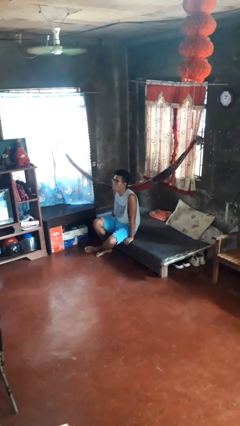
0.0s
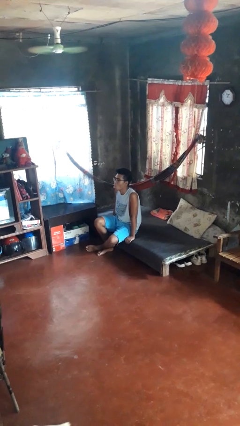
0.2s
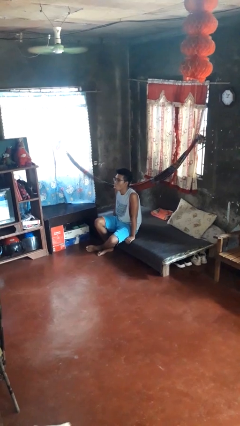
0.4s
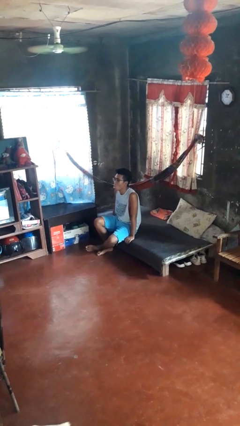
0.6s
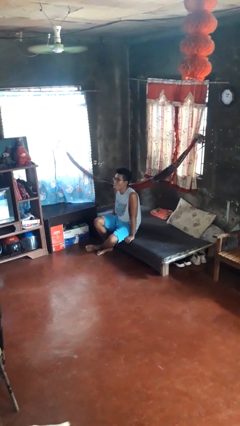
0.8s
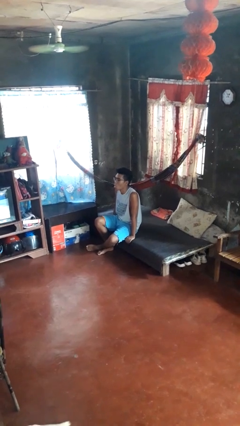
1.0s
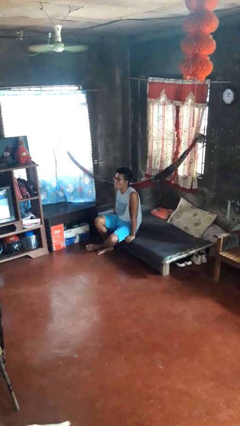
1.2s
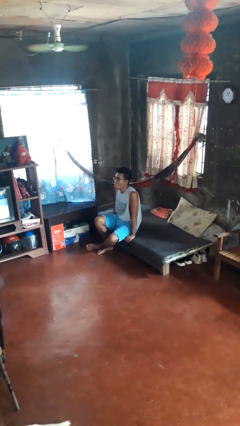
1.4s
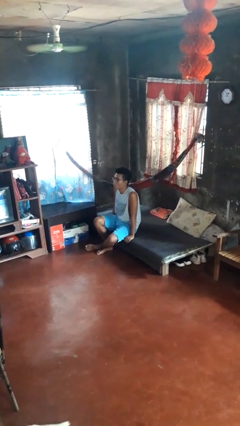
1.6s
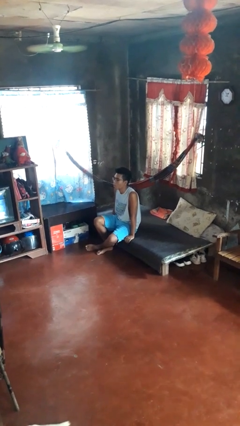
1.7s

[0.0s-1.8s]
person sticks out tongue

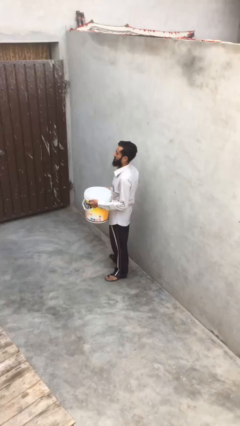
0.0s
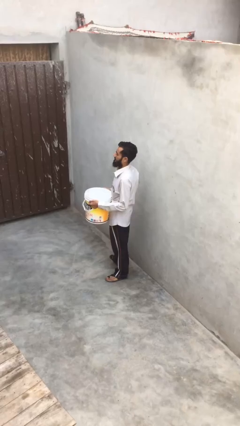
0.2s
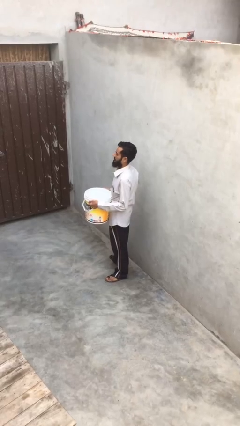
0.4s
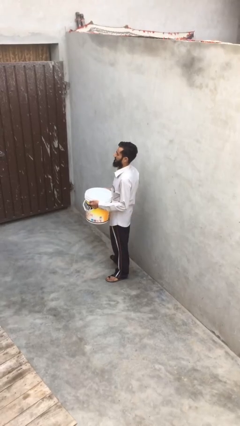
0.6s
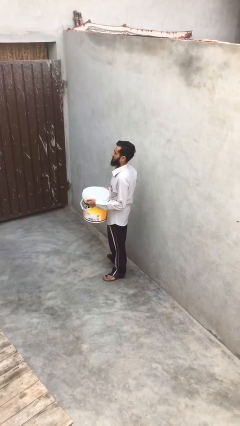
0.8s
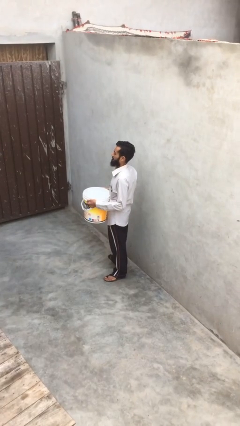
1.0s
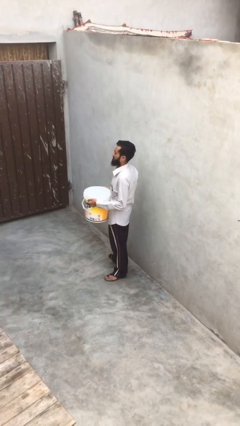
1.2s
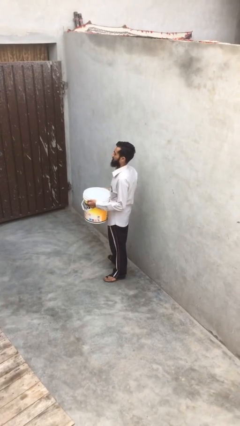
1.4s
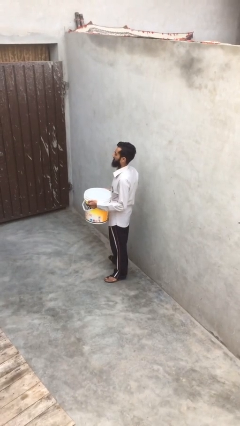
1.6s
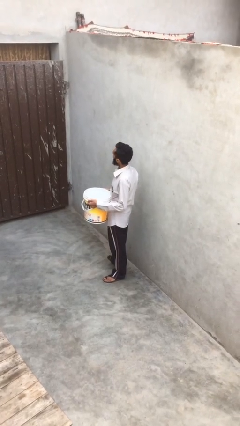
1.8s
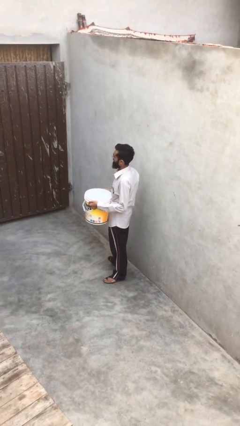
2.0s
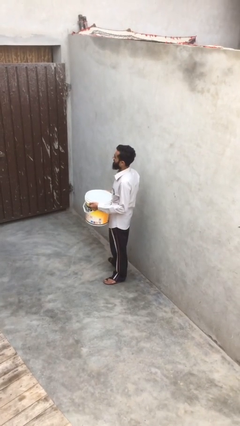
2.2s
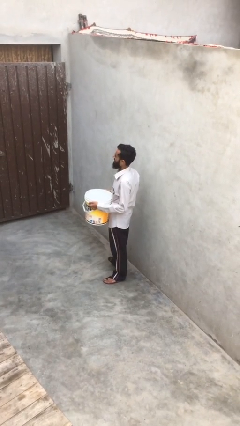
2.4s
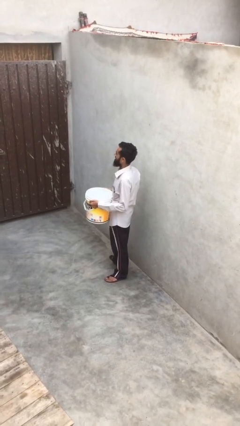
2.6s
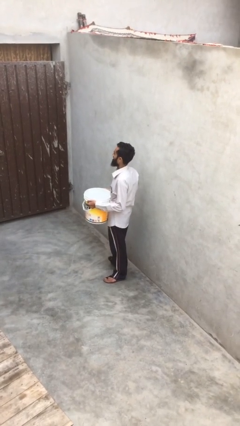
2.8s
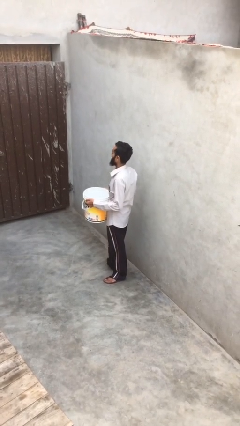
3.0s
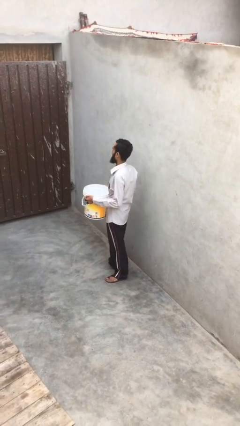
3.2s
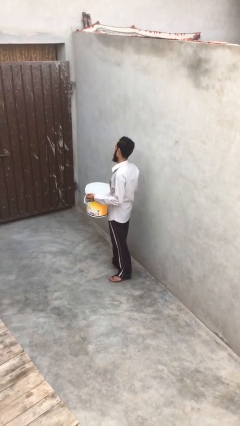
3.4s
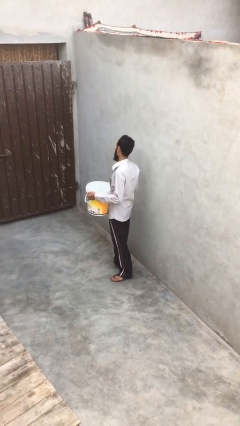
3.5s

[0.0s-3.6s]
person carries heavy object

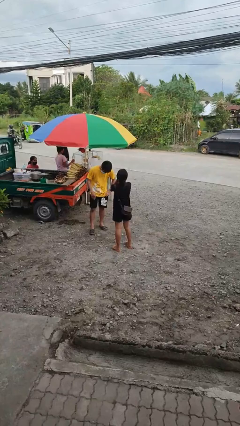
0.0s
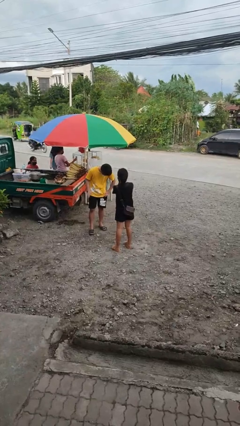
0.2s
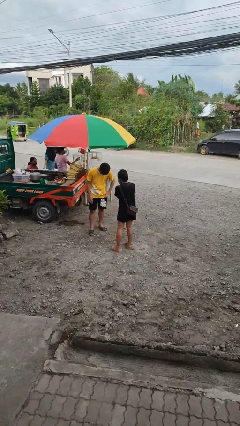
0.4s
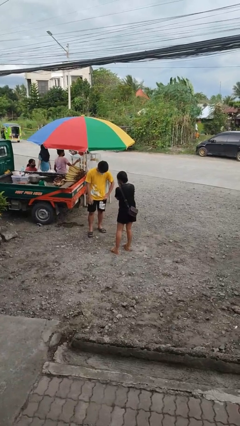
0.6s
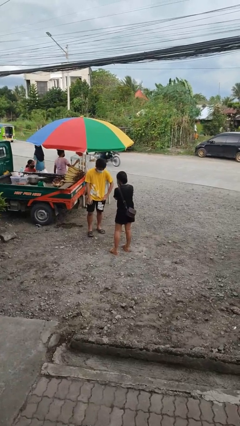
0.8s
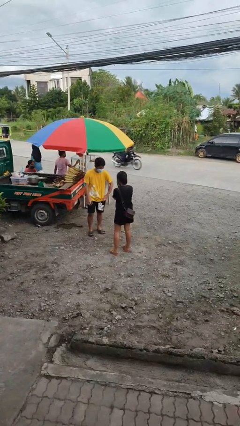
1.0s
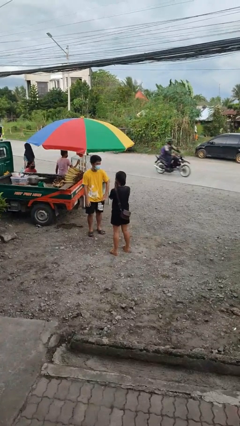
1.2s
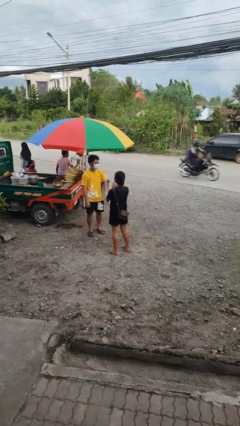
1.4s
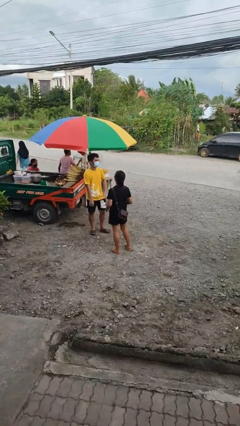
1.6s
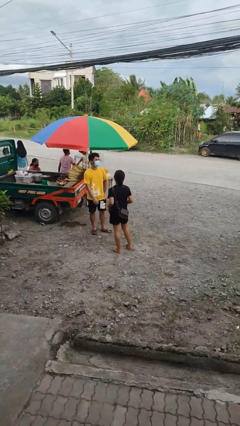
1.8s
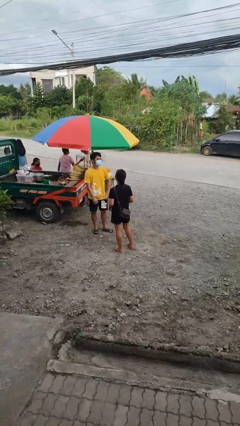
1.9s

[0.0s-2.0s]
person laughs with person

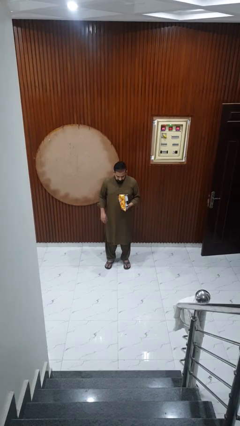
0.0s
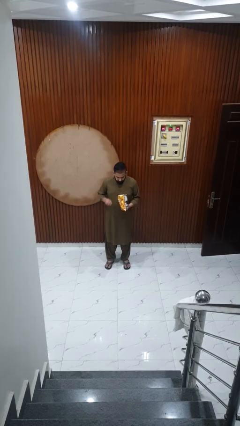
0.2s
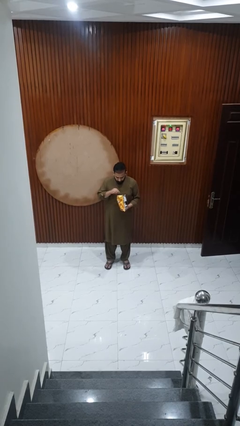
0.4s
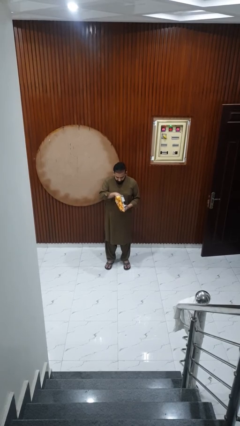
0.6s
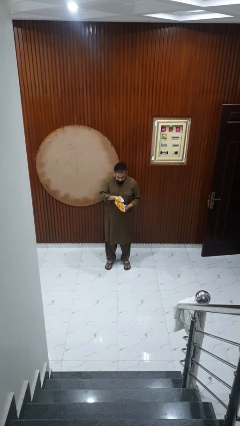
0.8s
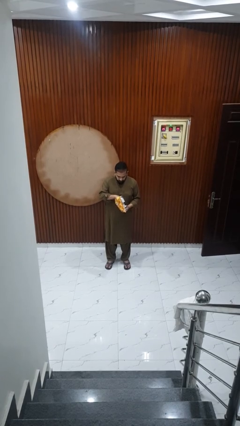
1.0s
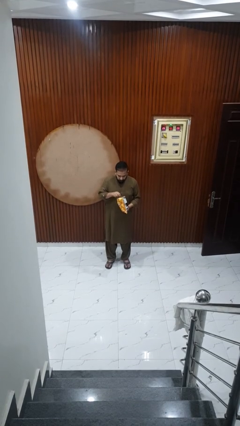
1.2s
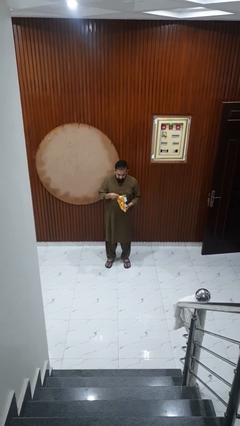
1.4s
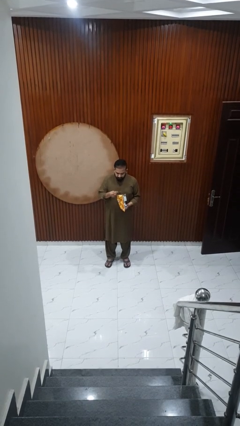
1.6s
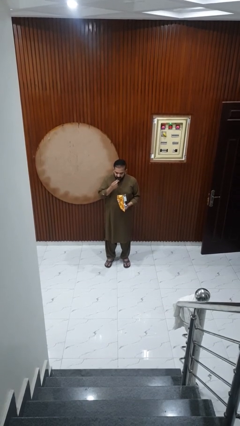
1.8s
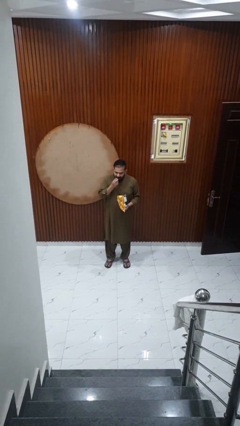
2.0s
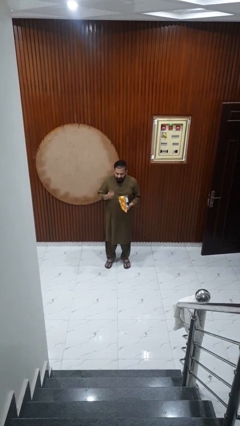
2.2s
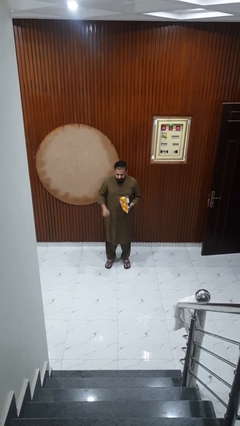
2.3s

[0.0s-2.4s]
person eats snack from bag

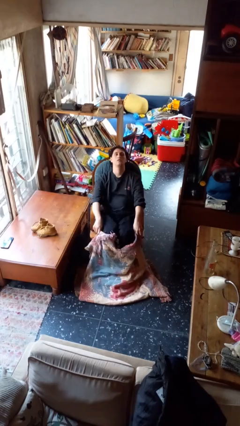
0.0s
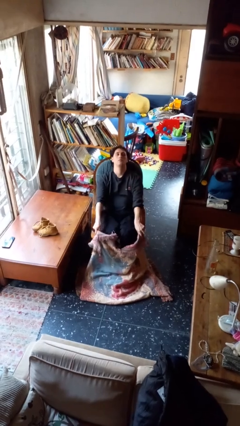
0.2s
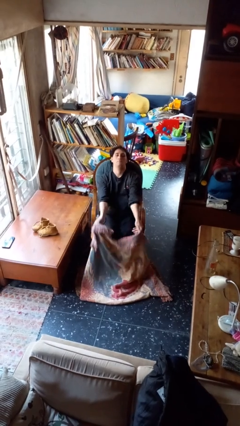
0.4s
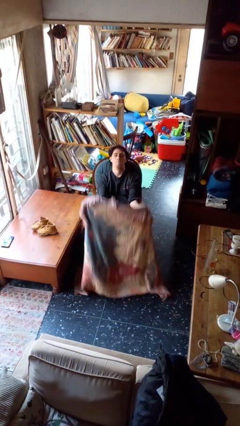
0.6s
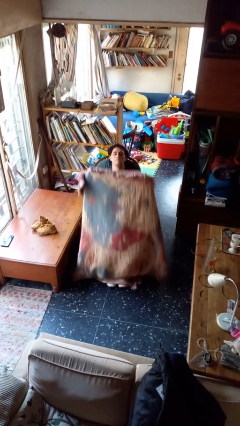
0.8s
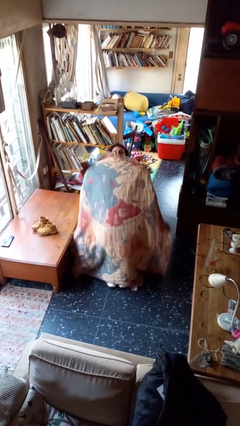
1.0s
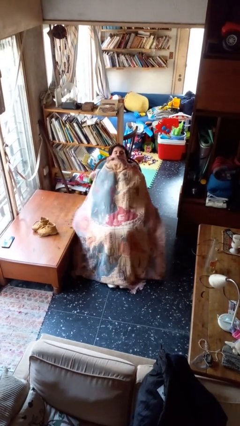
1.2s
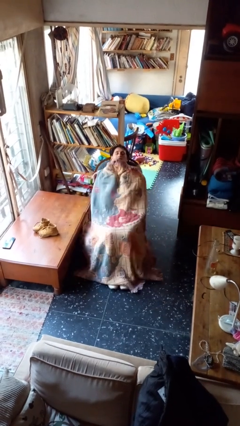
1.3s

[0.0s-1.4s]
person covers with blanket

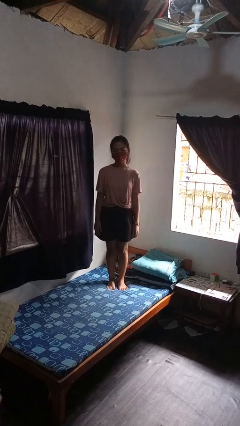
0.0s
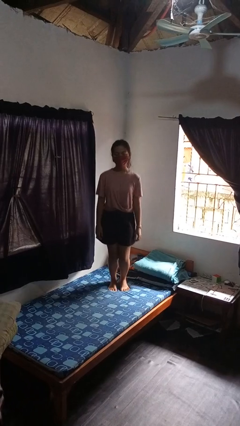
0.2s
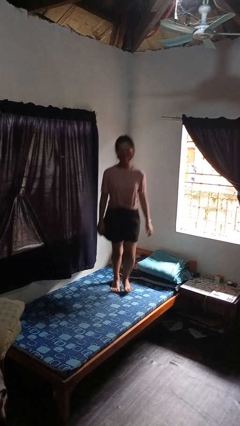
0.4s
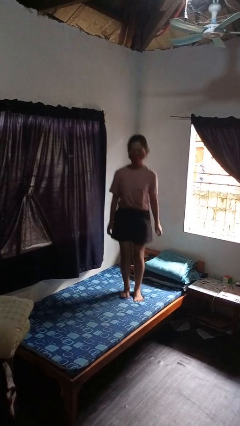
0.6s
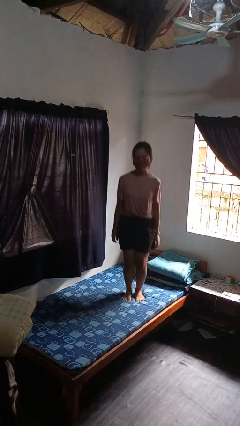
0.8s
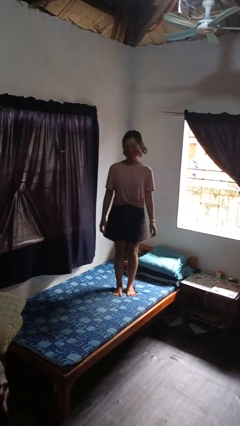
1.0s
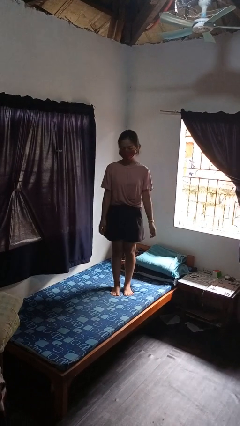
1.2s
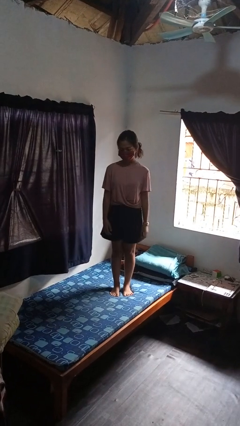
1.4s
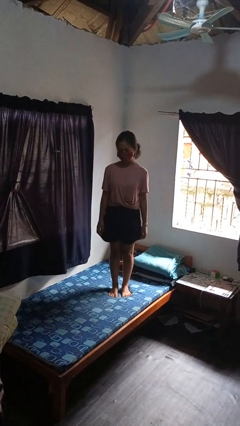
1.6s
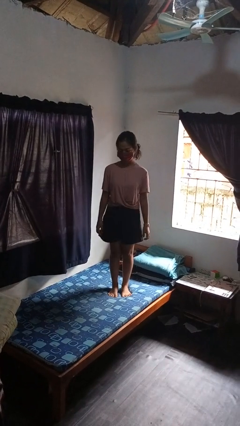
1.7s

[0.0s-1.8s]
person jumps on bed

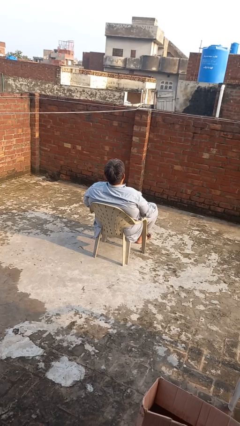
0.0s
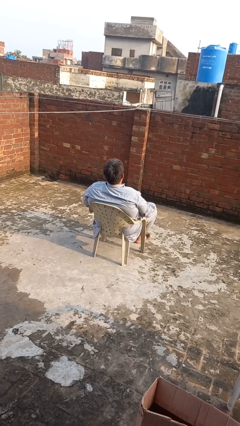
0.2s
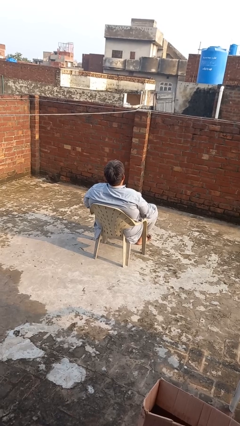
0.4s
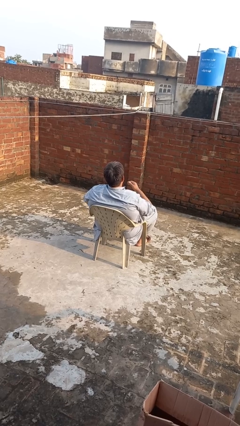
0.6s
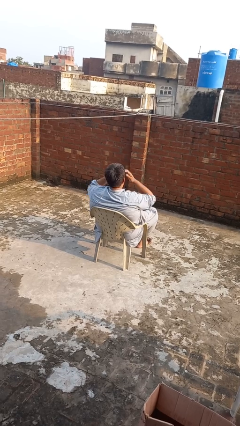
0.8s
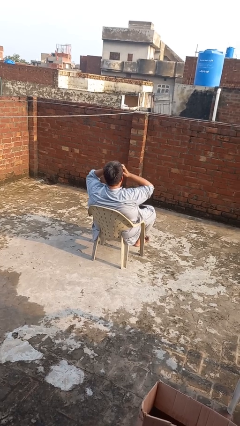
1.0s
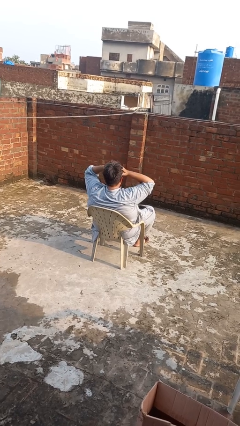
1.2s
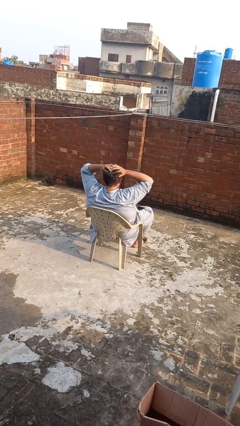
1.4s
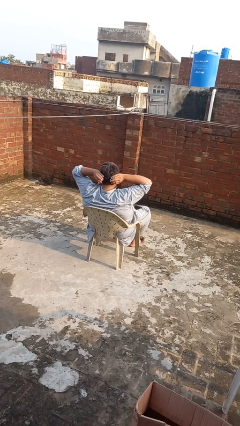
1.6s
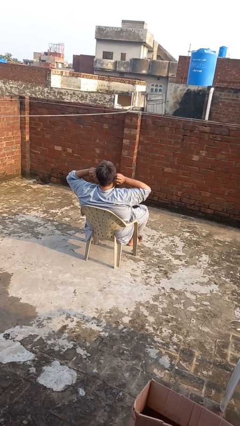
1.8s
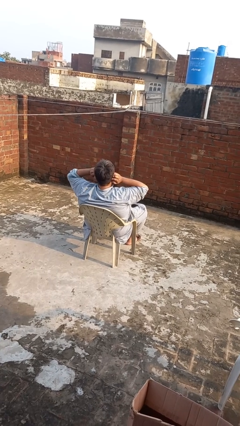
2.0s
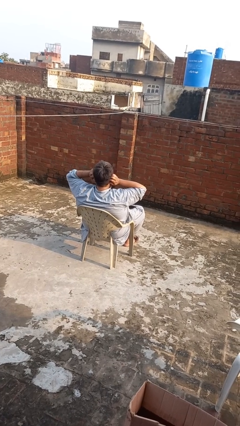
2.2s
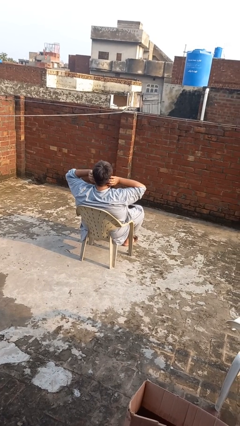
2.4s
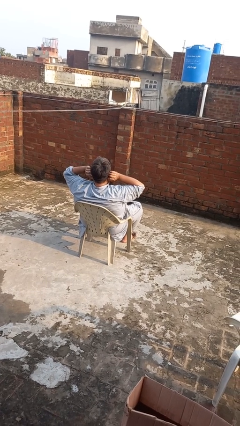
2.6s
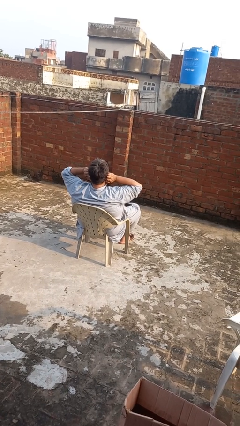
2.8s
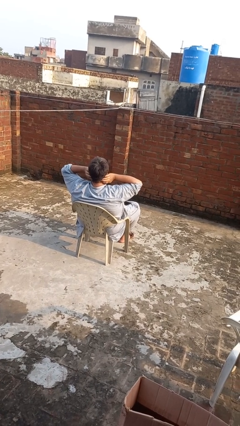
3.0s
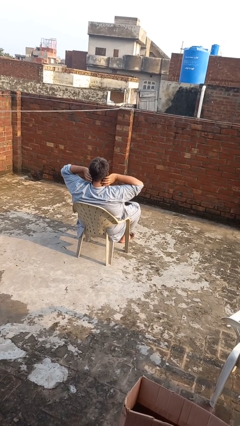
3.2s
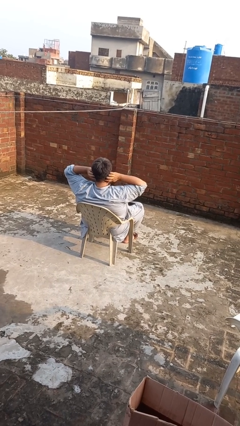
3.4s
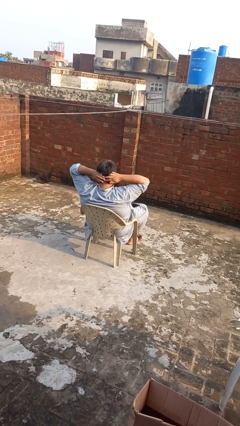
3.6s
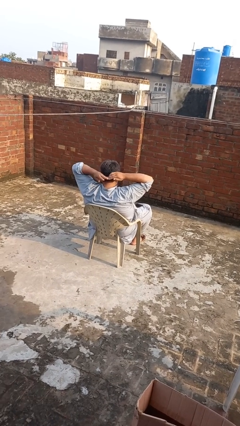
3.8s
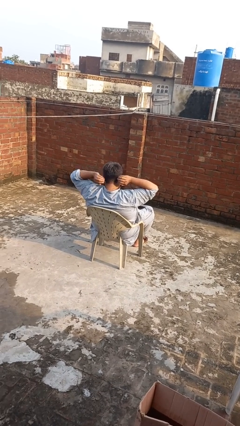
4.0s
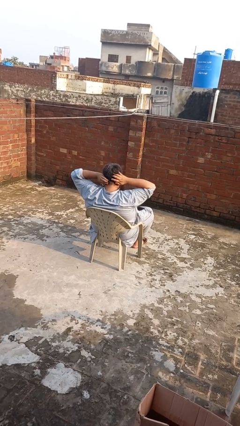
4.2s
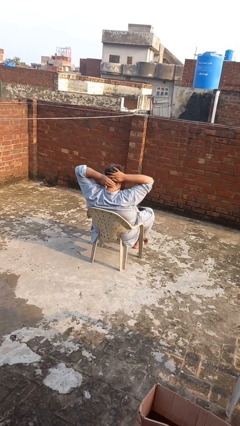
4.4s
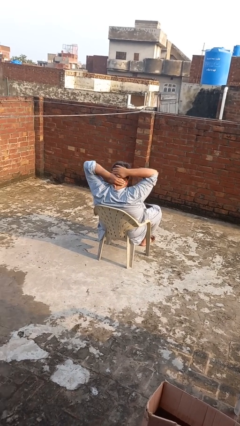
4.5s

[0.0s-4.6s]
person strokes hair
